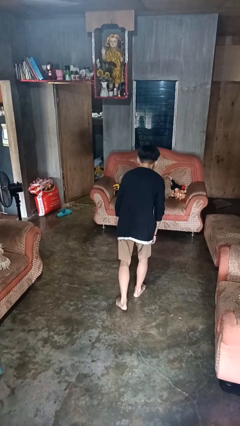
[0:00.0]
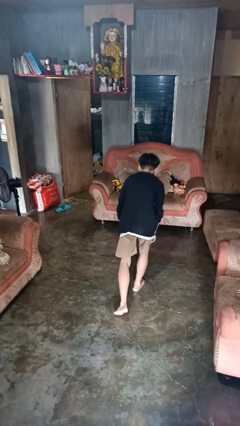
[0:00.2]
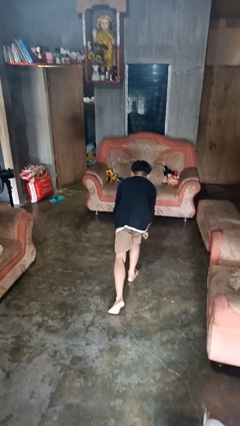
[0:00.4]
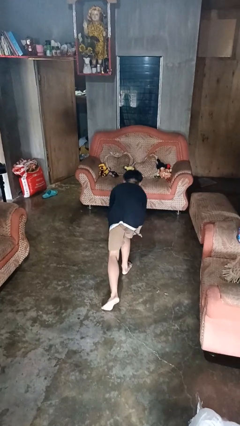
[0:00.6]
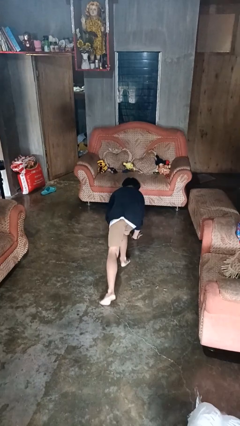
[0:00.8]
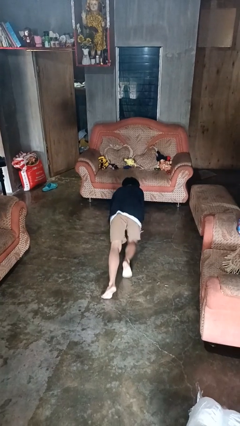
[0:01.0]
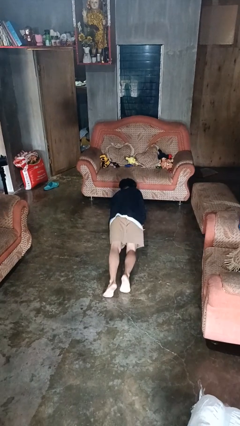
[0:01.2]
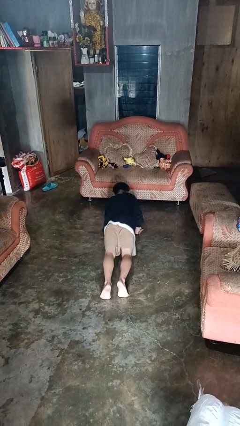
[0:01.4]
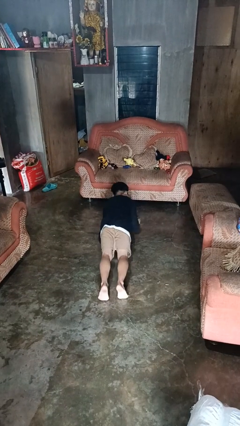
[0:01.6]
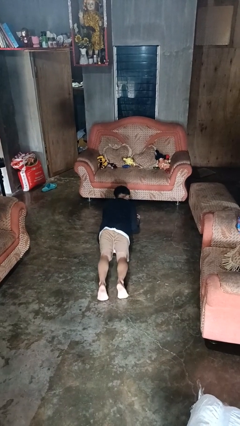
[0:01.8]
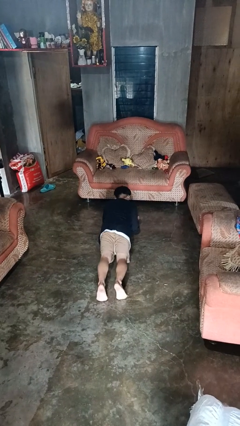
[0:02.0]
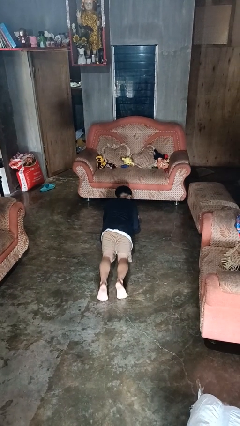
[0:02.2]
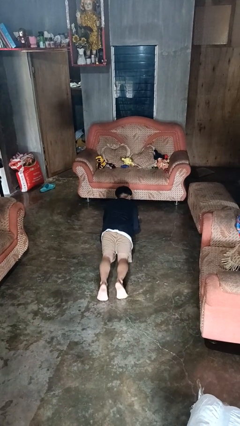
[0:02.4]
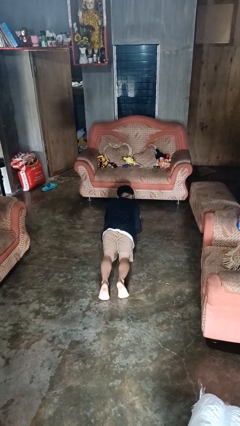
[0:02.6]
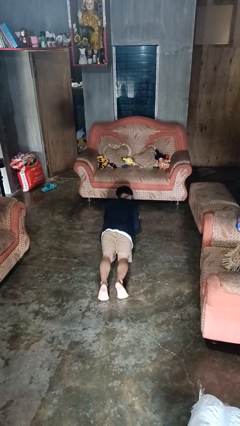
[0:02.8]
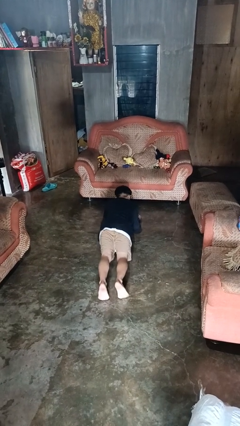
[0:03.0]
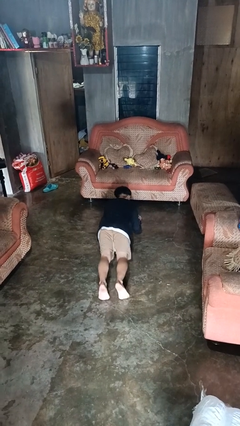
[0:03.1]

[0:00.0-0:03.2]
person exercises with plank

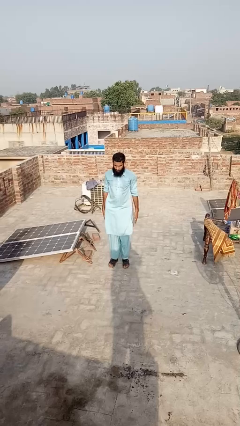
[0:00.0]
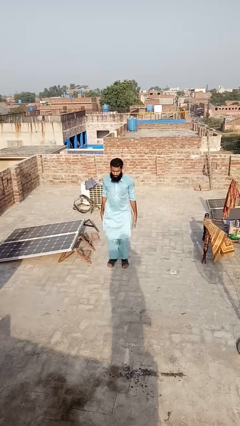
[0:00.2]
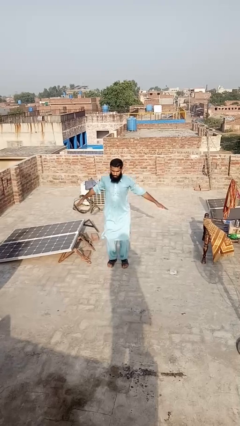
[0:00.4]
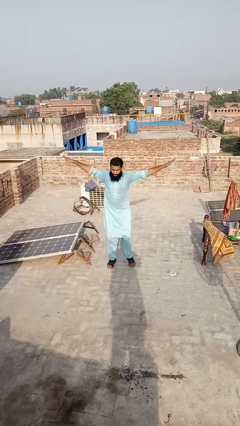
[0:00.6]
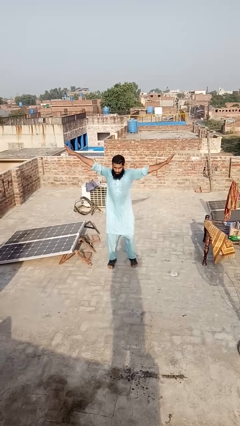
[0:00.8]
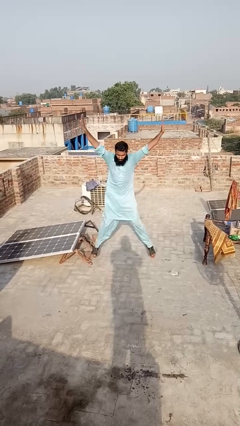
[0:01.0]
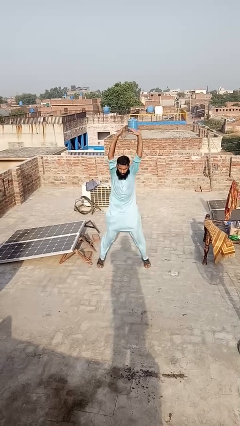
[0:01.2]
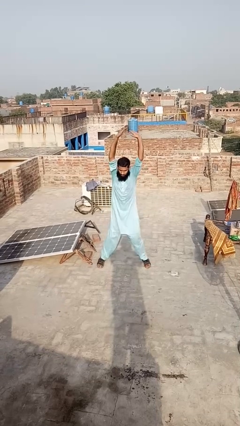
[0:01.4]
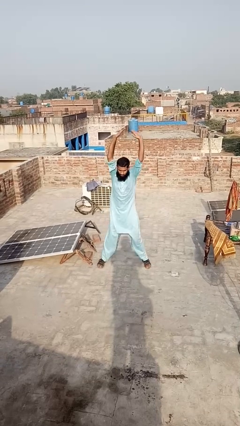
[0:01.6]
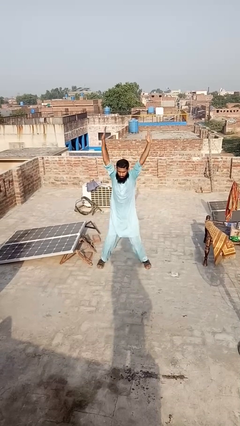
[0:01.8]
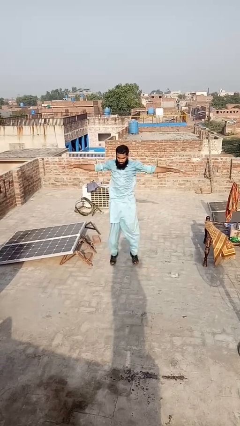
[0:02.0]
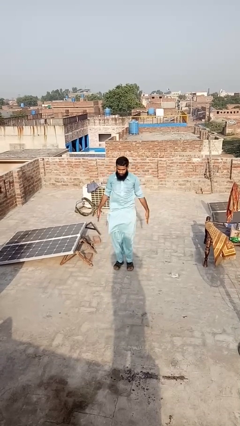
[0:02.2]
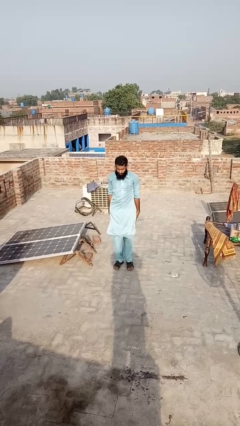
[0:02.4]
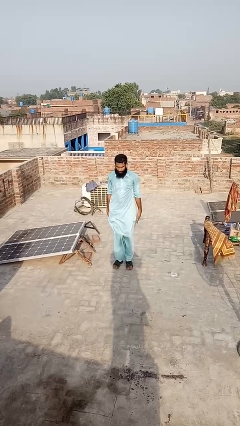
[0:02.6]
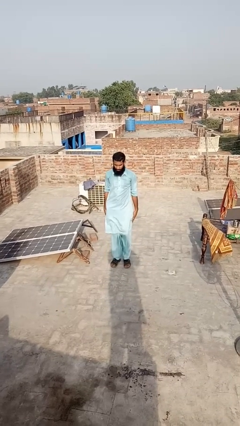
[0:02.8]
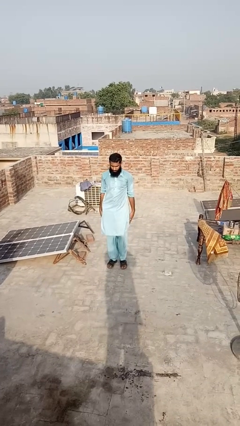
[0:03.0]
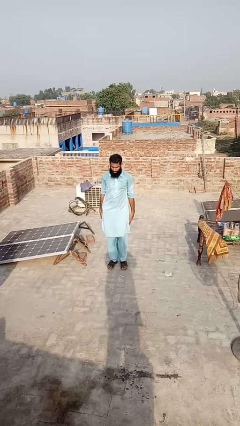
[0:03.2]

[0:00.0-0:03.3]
person exercises with jumping jacks

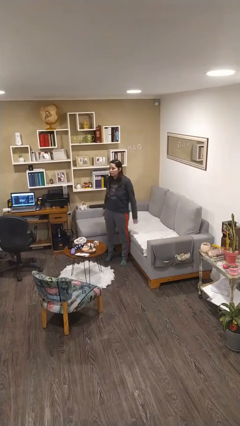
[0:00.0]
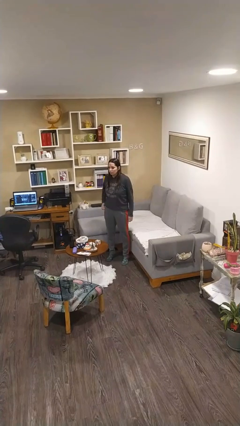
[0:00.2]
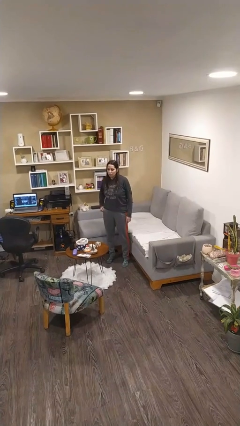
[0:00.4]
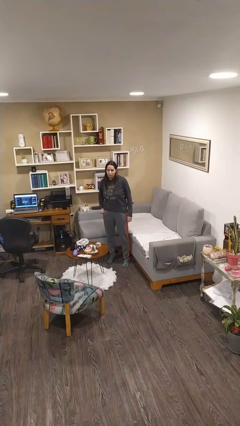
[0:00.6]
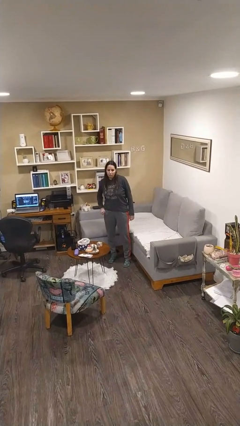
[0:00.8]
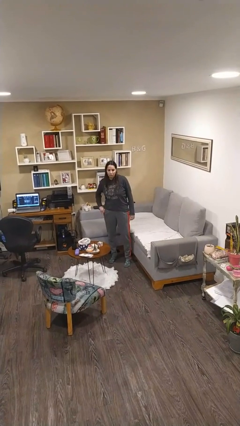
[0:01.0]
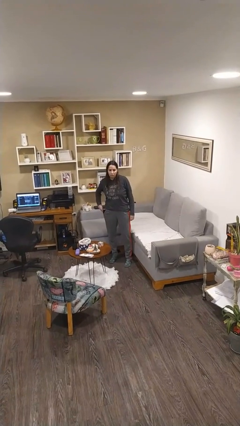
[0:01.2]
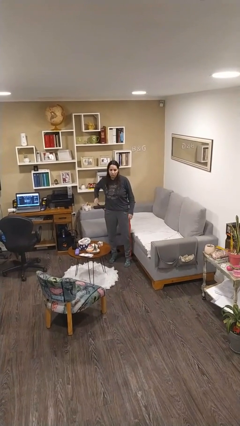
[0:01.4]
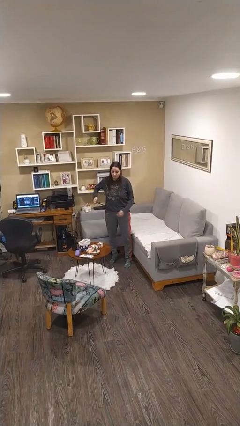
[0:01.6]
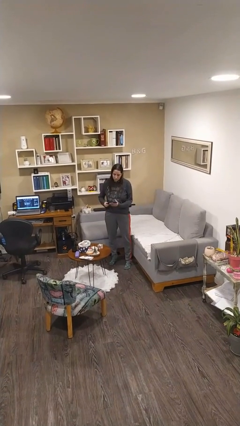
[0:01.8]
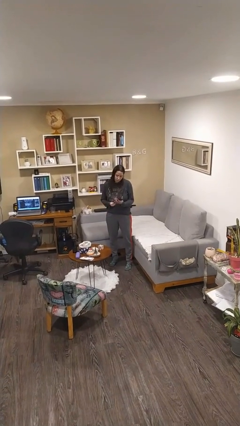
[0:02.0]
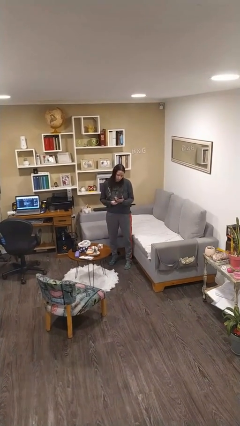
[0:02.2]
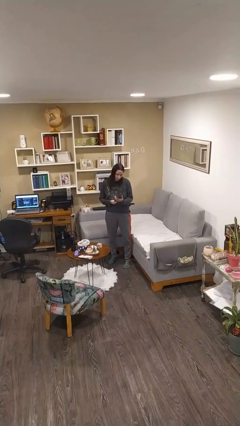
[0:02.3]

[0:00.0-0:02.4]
person takes phone from pocket

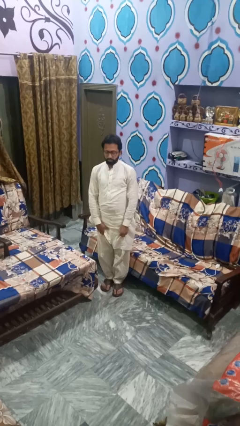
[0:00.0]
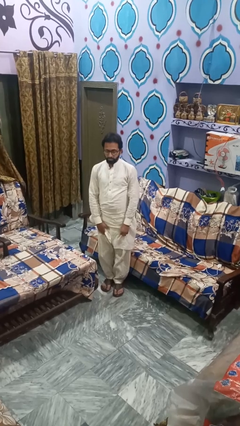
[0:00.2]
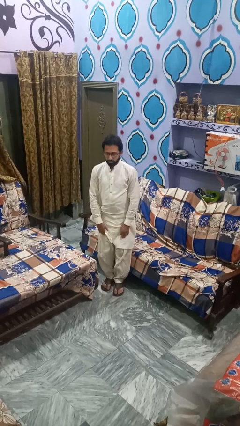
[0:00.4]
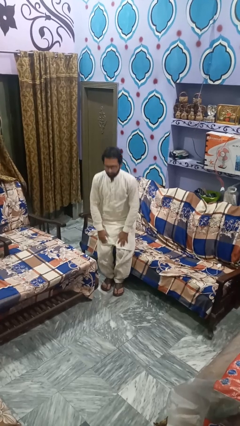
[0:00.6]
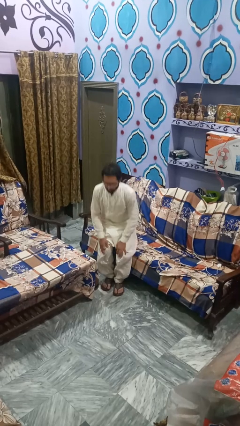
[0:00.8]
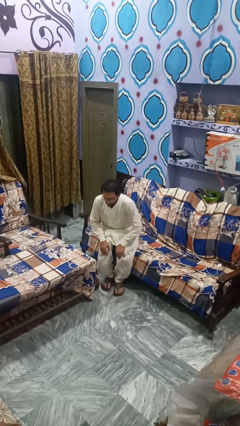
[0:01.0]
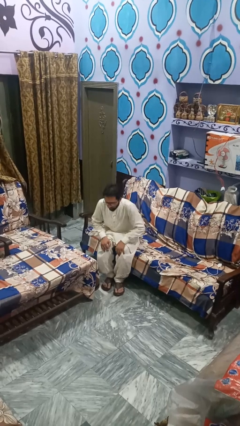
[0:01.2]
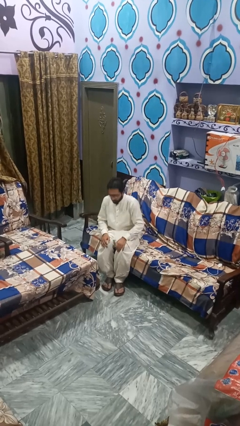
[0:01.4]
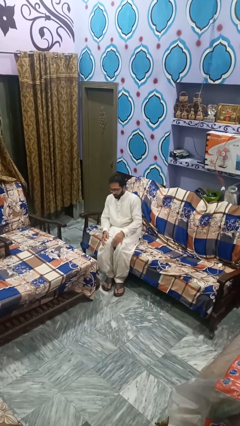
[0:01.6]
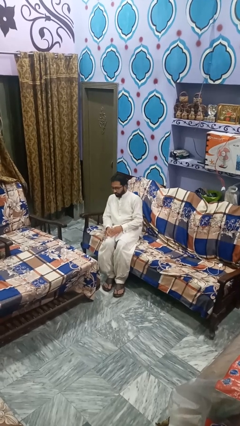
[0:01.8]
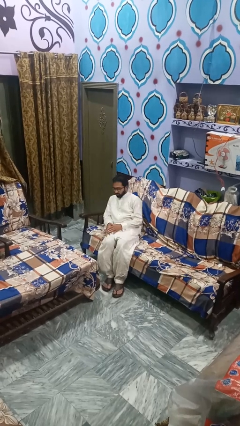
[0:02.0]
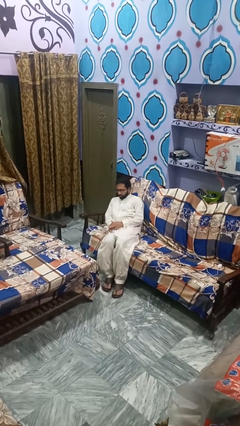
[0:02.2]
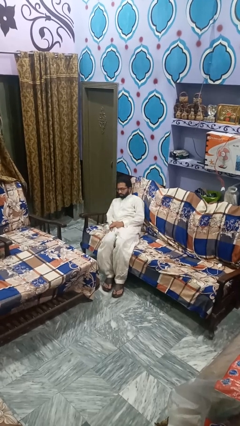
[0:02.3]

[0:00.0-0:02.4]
person lies down on couch

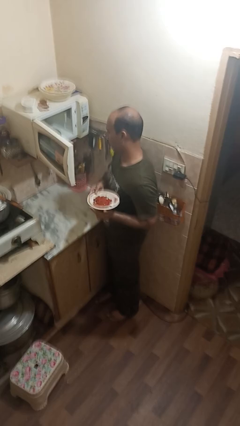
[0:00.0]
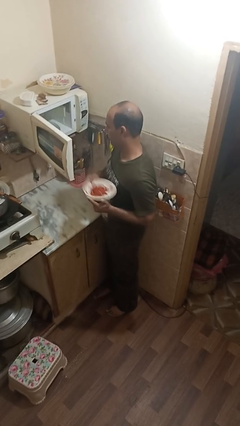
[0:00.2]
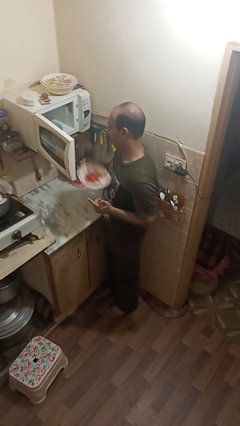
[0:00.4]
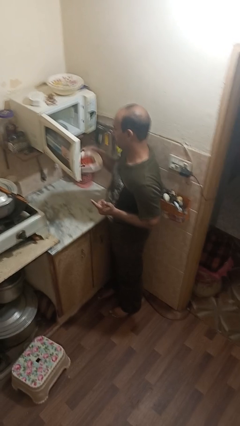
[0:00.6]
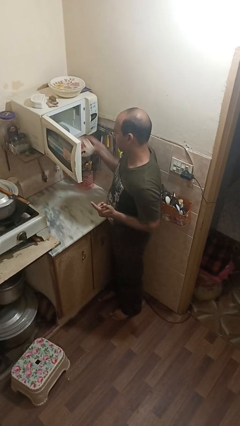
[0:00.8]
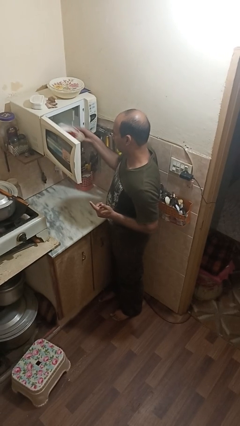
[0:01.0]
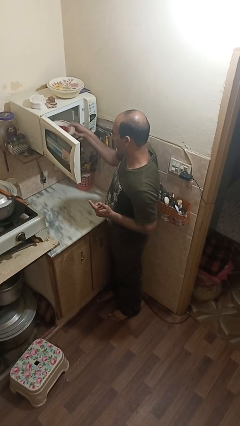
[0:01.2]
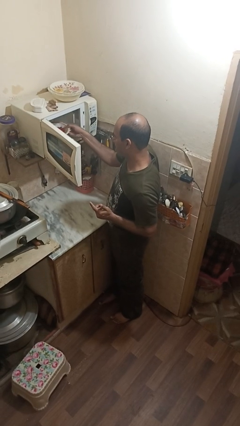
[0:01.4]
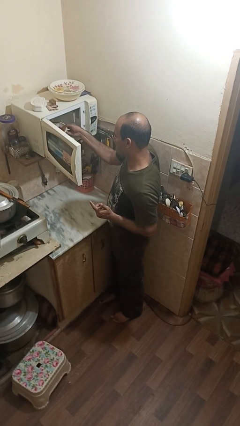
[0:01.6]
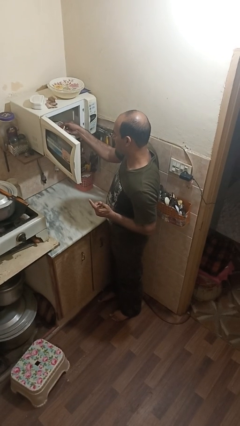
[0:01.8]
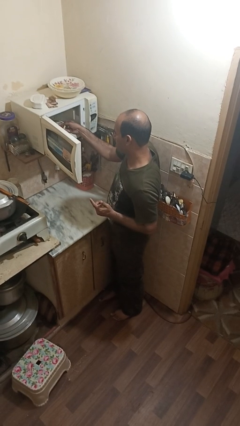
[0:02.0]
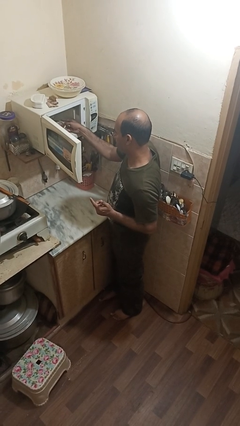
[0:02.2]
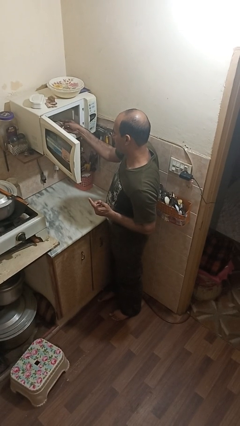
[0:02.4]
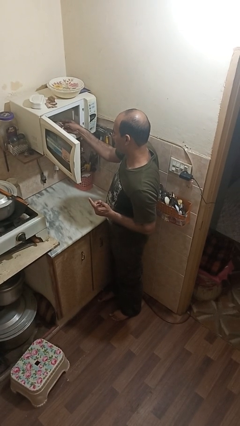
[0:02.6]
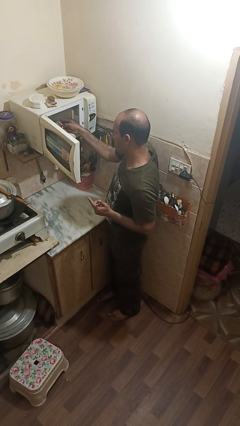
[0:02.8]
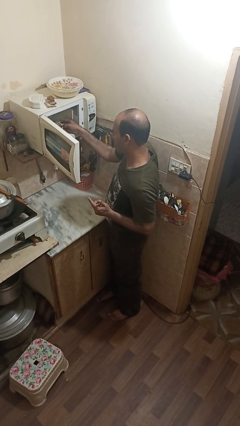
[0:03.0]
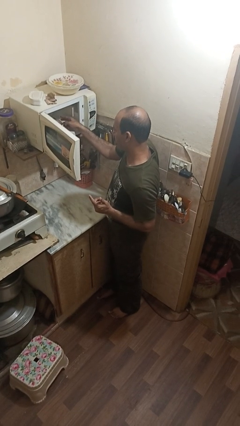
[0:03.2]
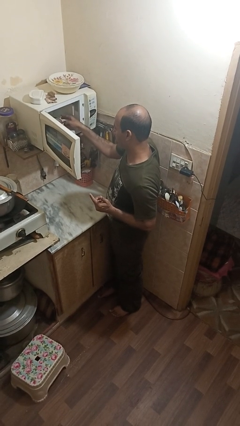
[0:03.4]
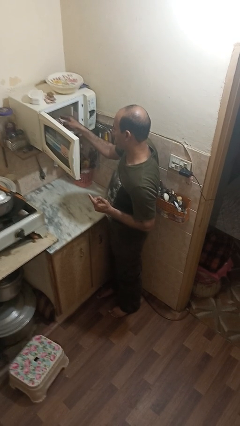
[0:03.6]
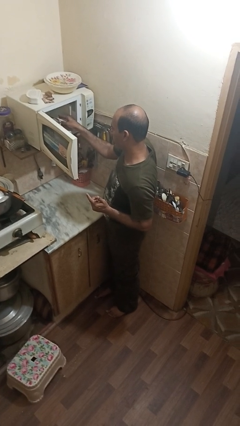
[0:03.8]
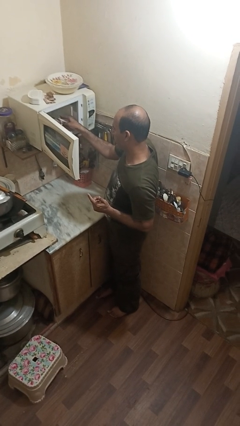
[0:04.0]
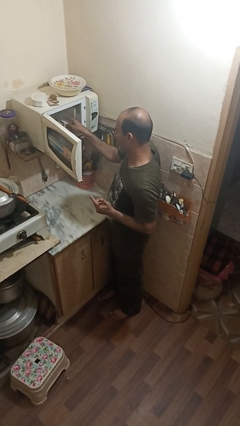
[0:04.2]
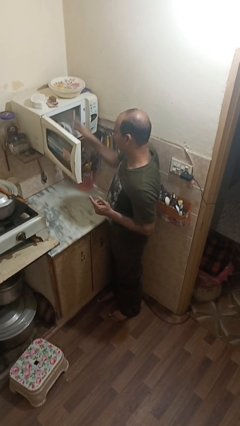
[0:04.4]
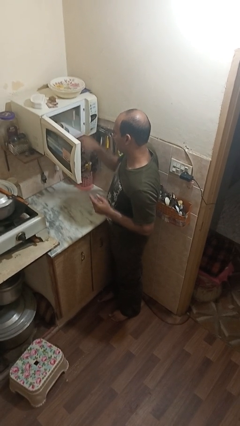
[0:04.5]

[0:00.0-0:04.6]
person puts object into microwave

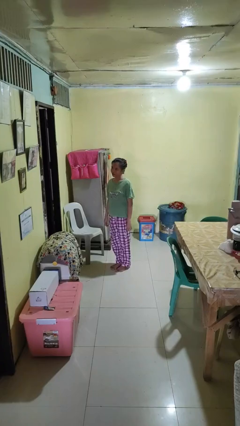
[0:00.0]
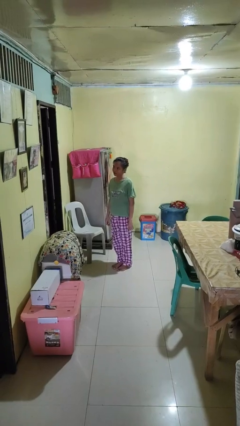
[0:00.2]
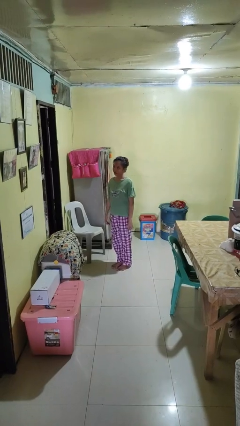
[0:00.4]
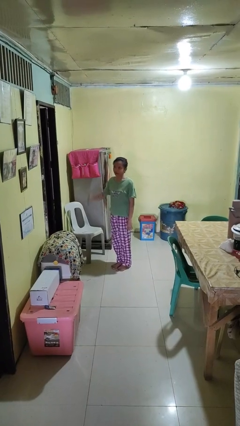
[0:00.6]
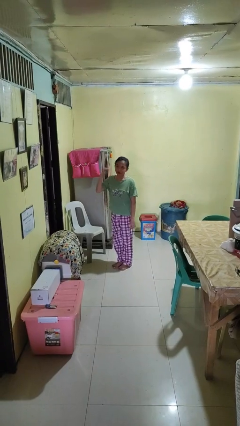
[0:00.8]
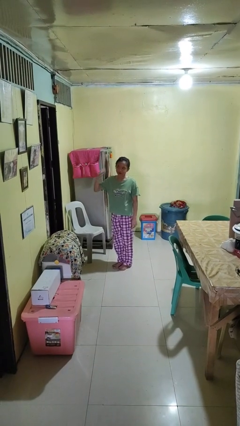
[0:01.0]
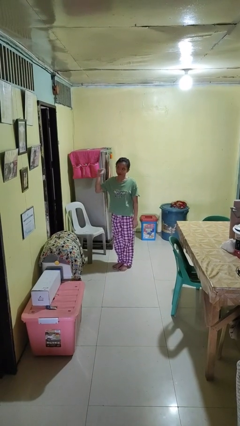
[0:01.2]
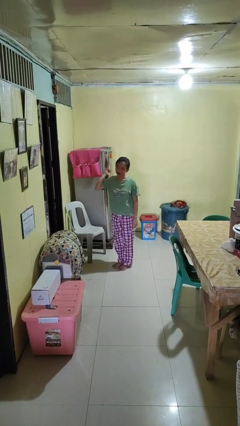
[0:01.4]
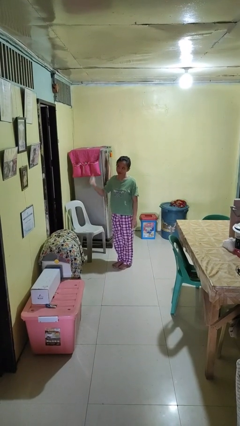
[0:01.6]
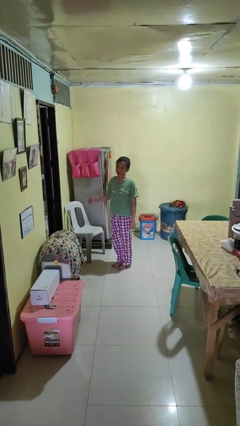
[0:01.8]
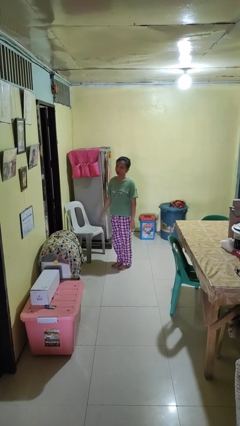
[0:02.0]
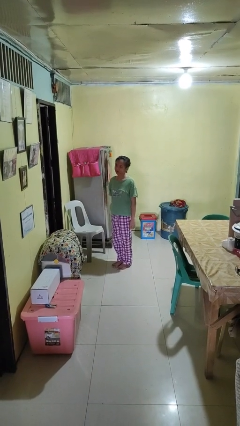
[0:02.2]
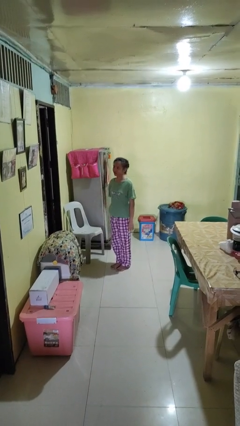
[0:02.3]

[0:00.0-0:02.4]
person gestures behind me
